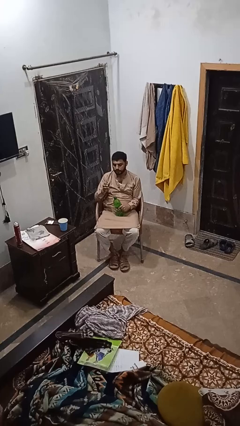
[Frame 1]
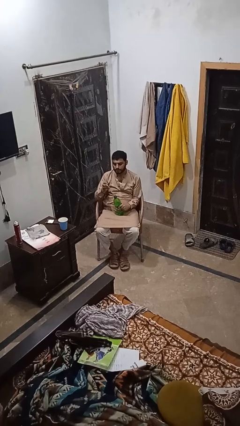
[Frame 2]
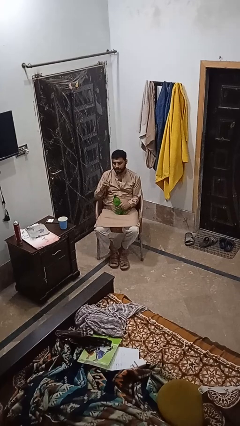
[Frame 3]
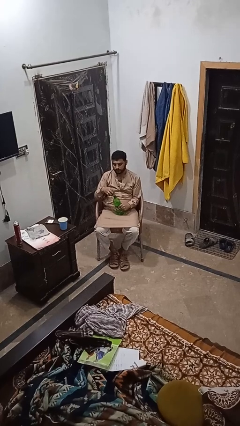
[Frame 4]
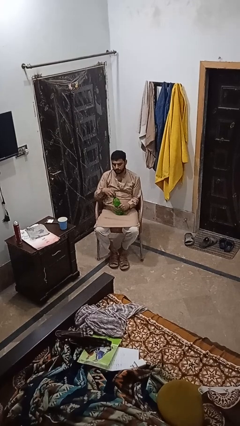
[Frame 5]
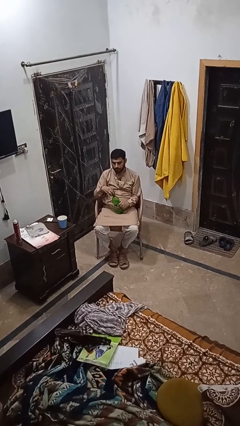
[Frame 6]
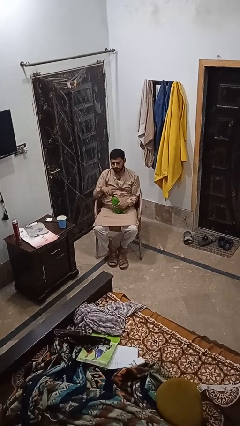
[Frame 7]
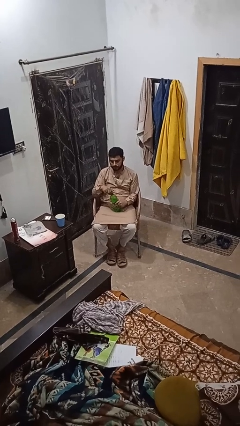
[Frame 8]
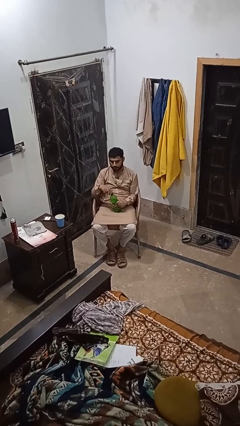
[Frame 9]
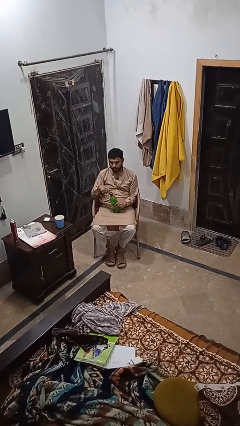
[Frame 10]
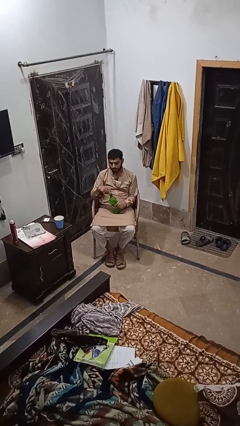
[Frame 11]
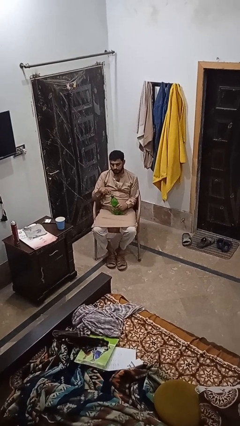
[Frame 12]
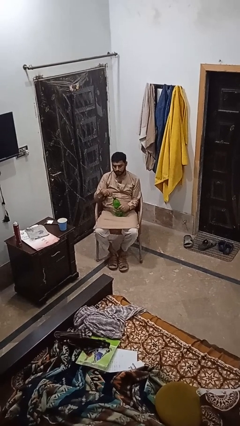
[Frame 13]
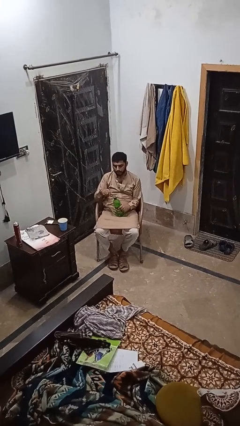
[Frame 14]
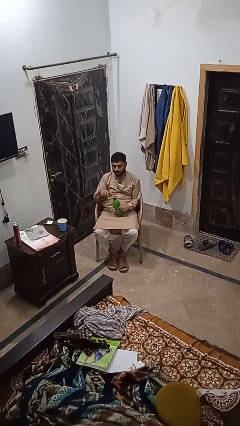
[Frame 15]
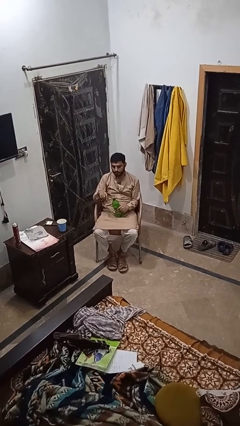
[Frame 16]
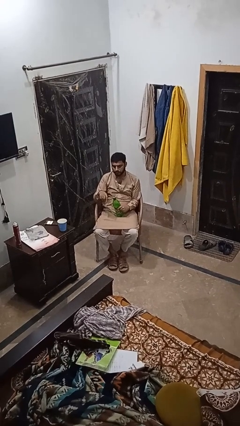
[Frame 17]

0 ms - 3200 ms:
person screws lid to bottle

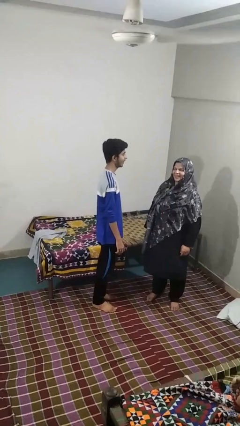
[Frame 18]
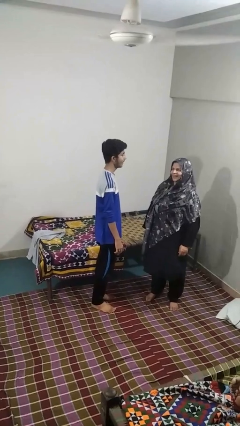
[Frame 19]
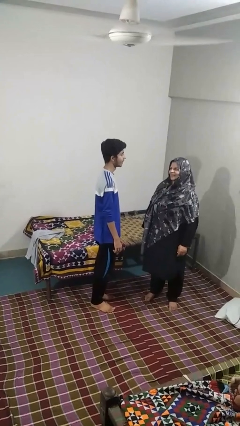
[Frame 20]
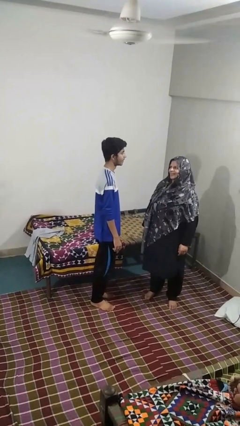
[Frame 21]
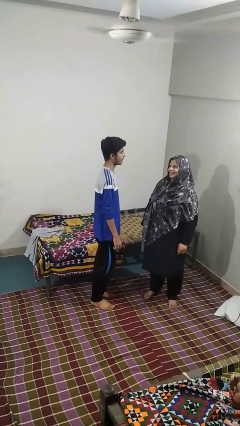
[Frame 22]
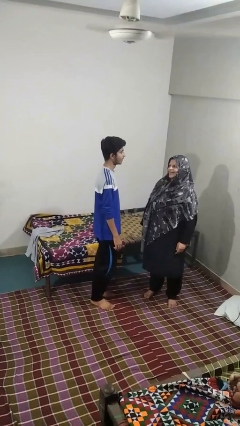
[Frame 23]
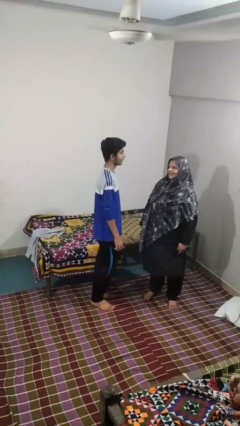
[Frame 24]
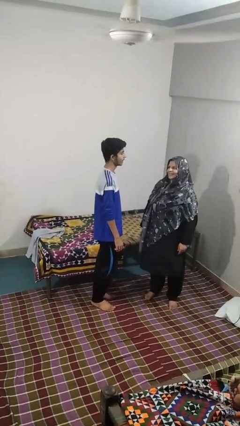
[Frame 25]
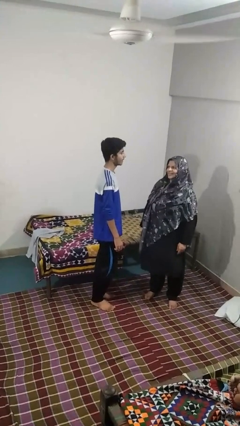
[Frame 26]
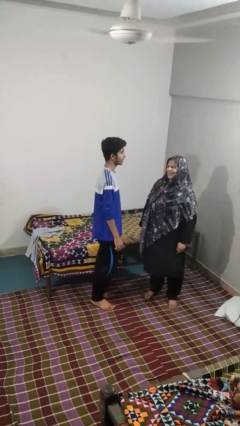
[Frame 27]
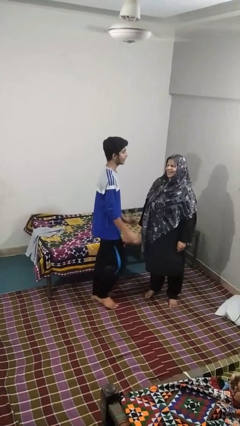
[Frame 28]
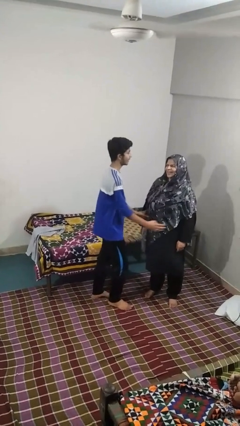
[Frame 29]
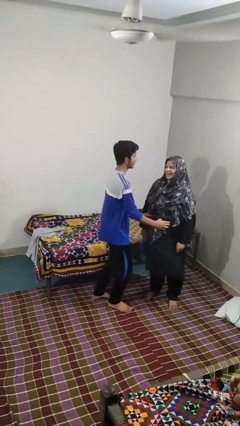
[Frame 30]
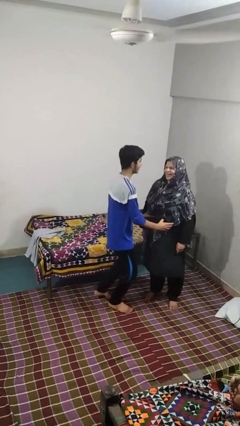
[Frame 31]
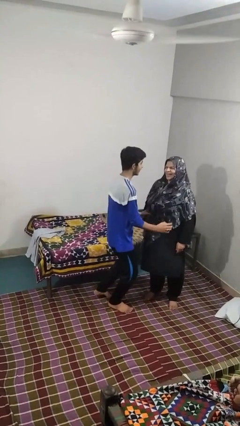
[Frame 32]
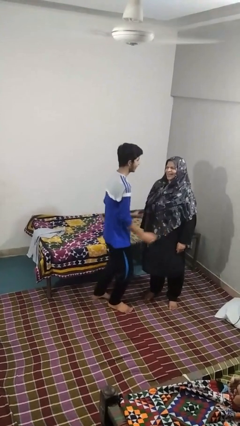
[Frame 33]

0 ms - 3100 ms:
person tickles person

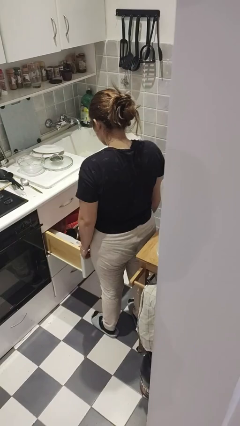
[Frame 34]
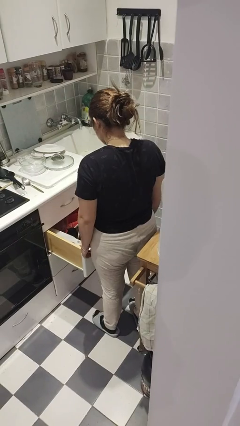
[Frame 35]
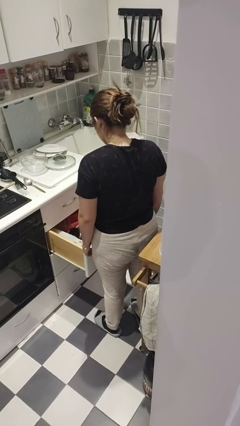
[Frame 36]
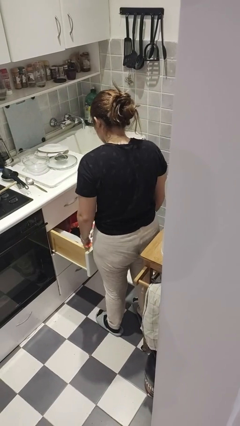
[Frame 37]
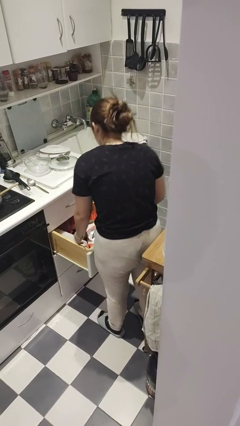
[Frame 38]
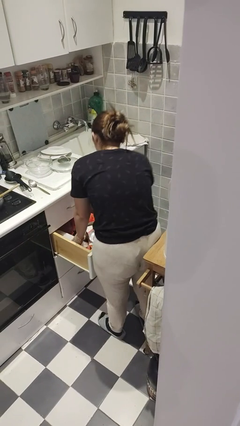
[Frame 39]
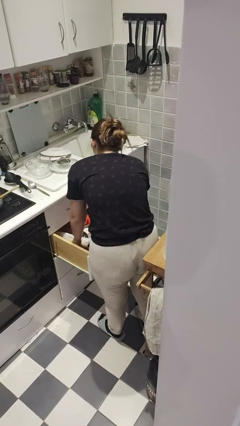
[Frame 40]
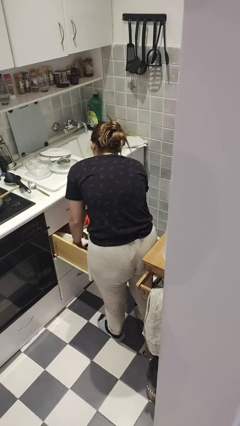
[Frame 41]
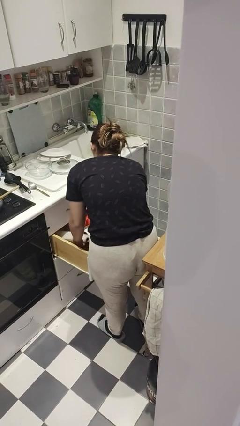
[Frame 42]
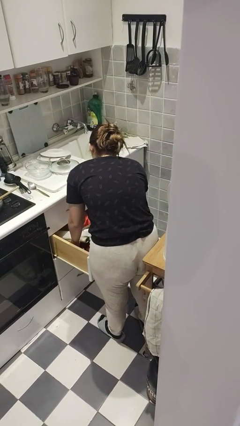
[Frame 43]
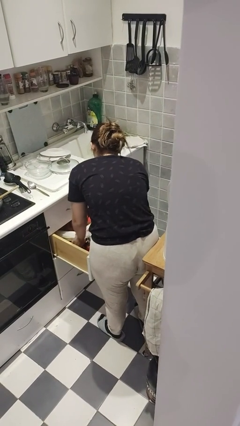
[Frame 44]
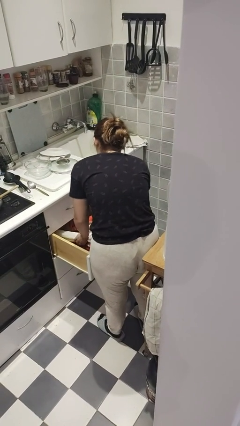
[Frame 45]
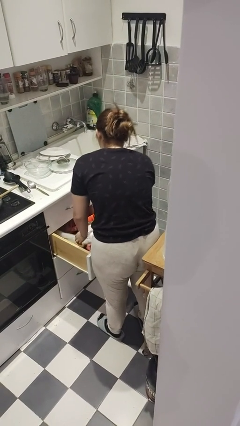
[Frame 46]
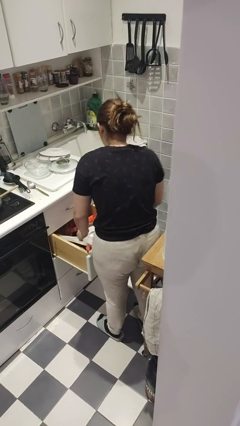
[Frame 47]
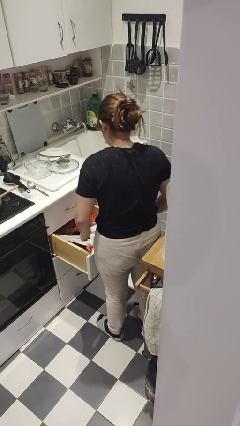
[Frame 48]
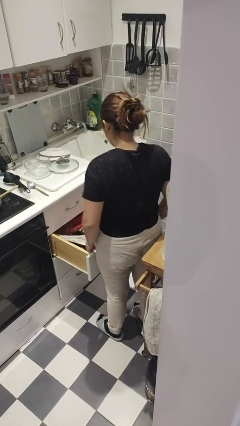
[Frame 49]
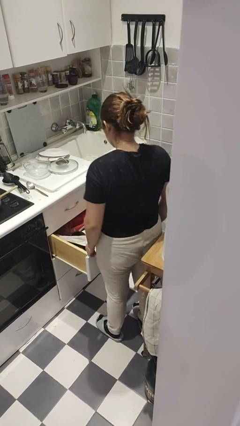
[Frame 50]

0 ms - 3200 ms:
person searches in kitchen drawer

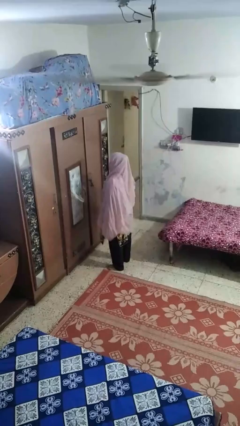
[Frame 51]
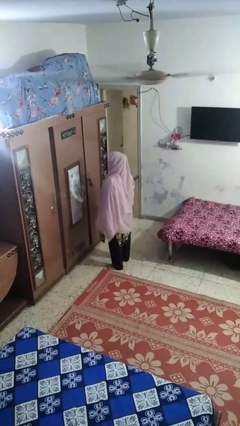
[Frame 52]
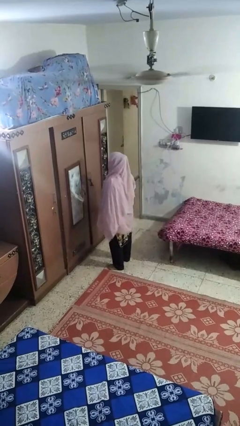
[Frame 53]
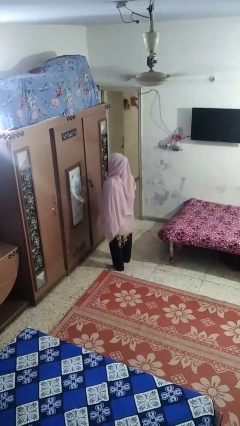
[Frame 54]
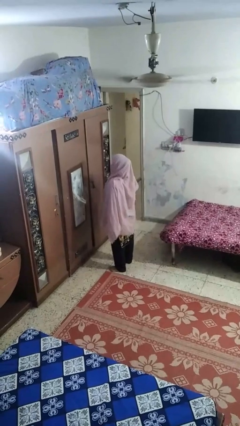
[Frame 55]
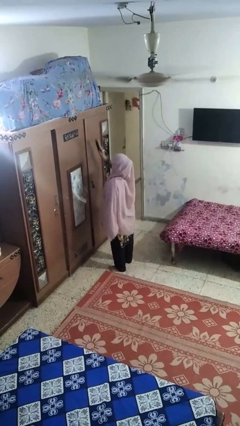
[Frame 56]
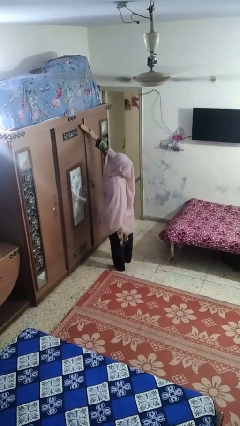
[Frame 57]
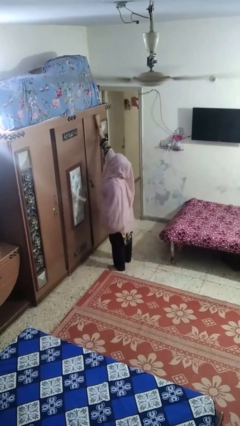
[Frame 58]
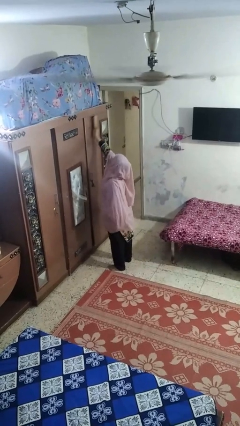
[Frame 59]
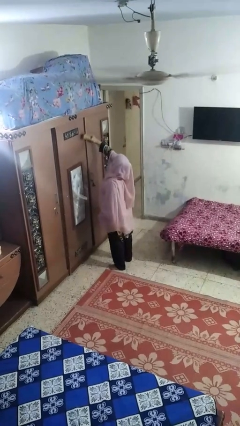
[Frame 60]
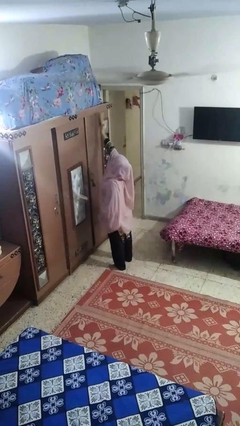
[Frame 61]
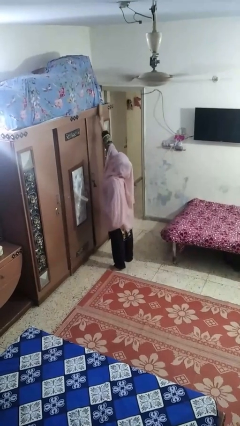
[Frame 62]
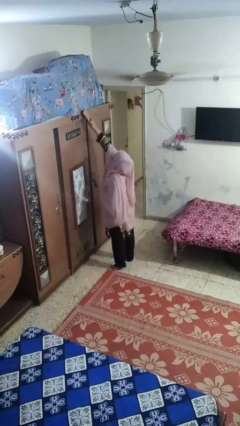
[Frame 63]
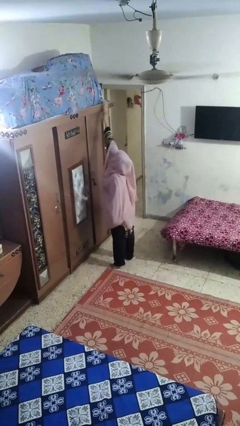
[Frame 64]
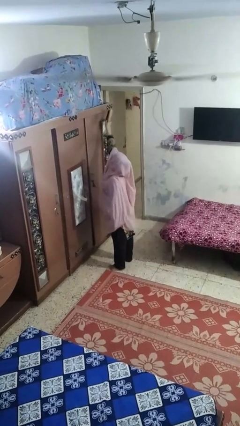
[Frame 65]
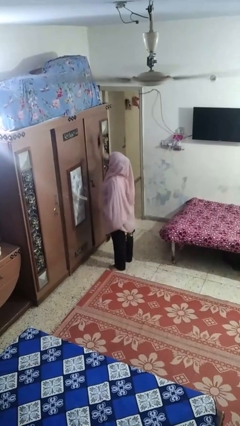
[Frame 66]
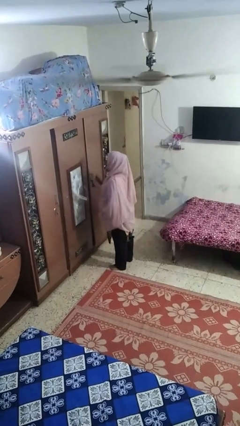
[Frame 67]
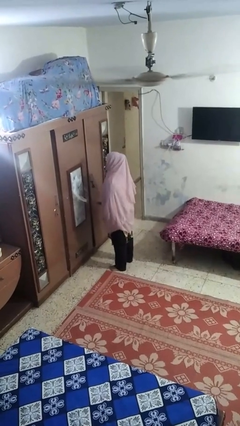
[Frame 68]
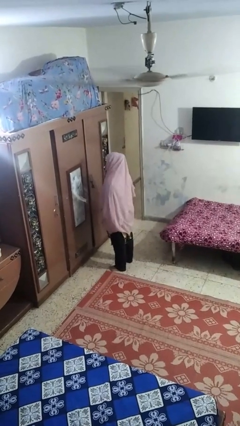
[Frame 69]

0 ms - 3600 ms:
person dusts furniture

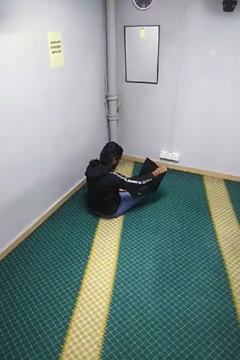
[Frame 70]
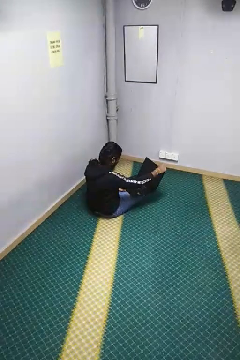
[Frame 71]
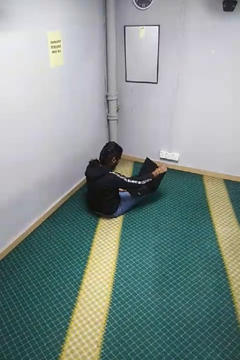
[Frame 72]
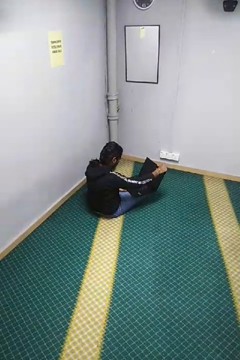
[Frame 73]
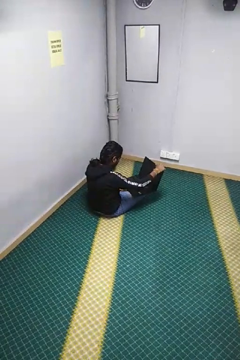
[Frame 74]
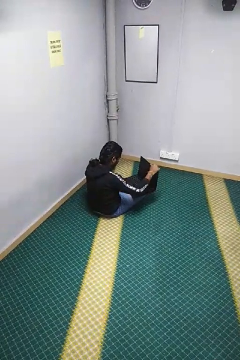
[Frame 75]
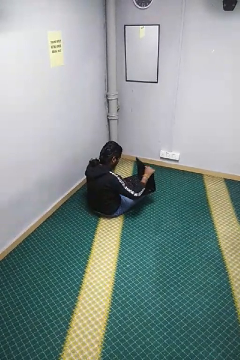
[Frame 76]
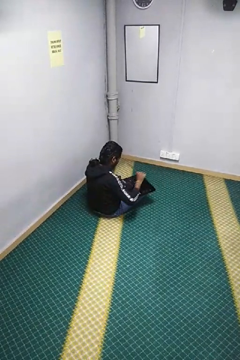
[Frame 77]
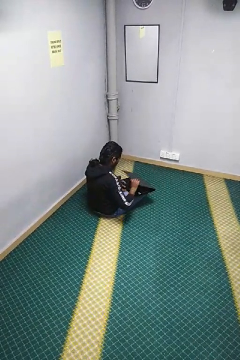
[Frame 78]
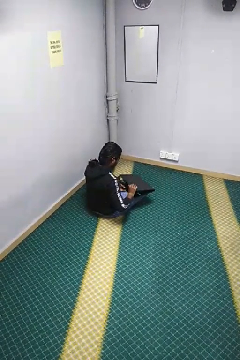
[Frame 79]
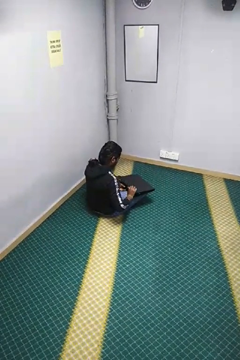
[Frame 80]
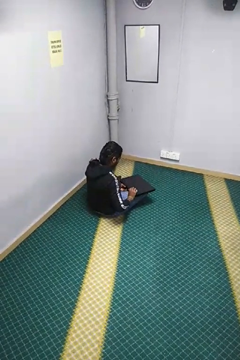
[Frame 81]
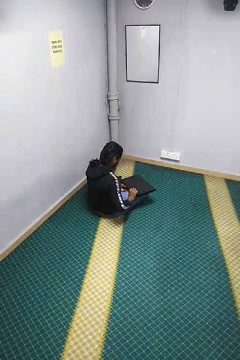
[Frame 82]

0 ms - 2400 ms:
person closes laptop

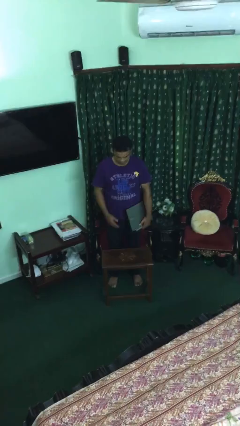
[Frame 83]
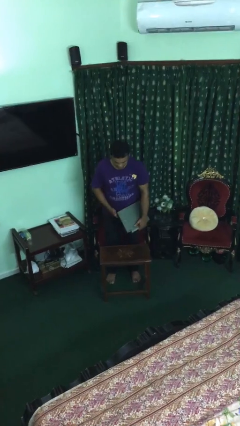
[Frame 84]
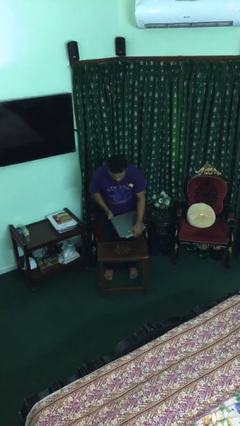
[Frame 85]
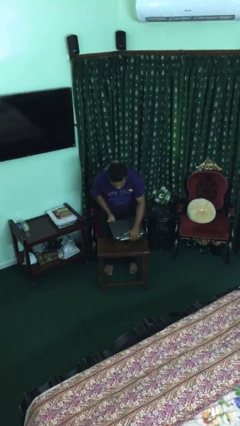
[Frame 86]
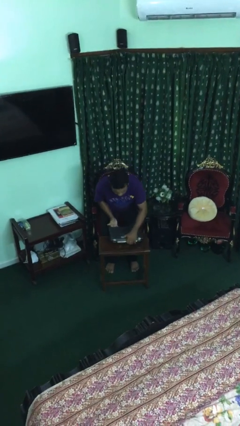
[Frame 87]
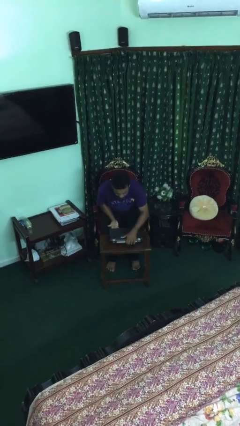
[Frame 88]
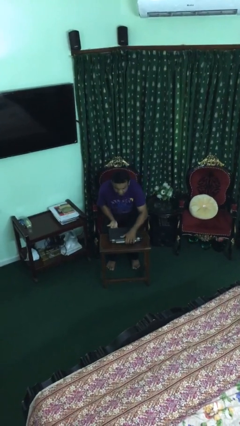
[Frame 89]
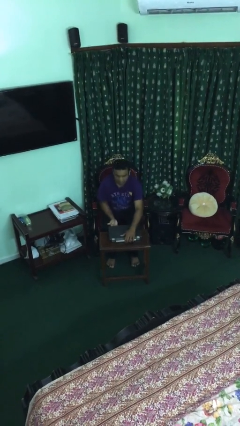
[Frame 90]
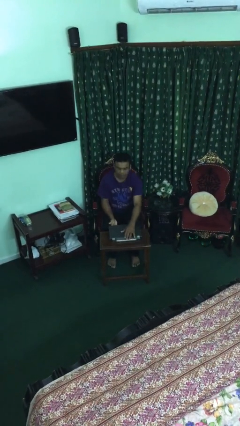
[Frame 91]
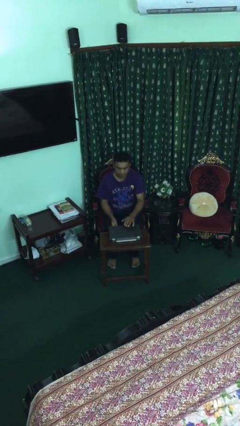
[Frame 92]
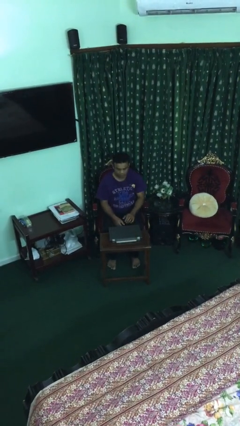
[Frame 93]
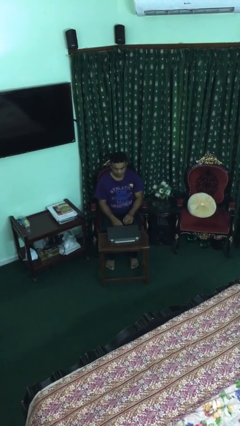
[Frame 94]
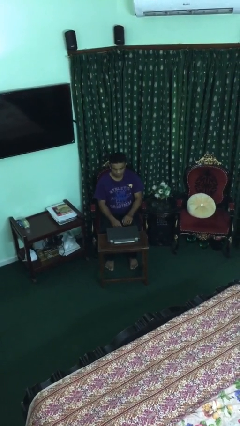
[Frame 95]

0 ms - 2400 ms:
person sits down

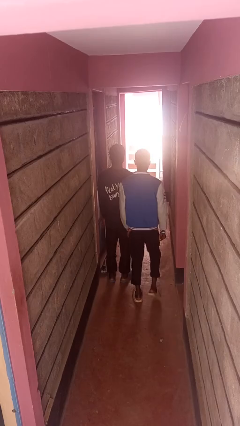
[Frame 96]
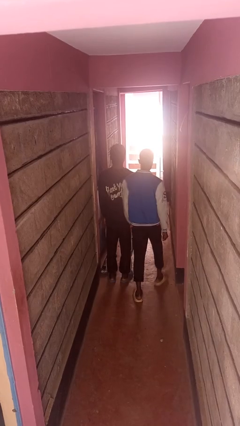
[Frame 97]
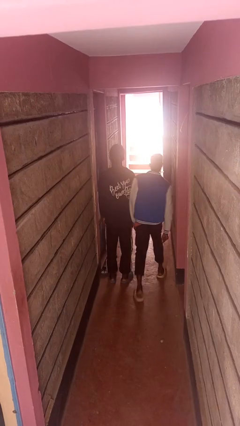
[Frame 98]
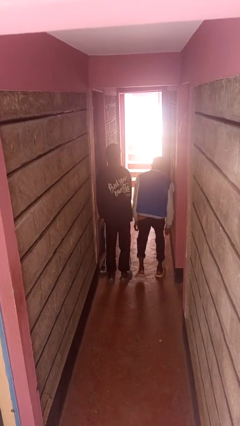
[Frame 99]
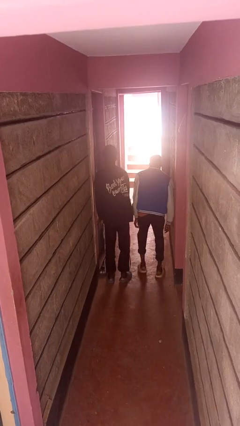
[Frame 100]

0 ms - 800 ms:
person bumps into person
